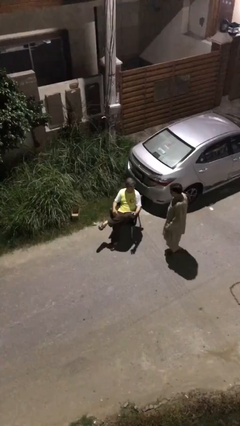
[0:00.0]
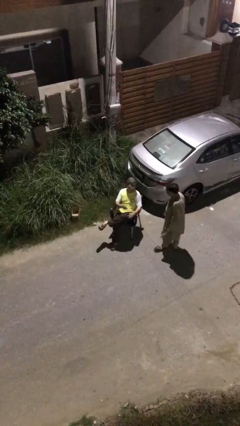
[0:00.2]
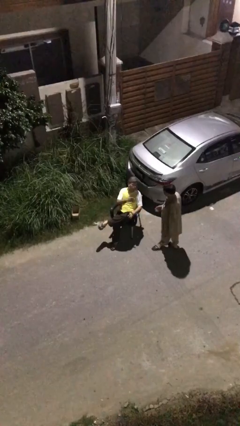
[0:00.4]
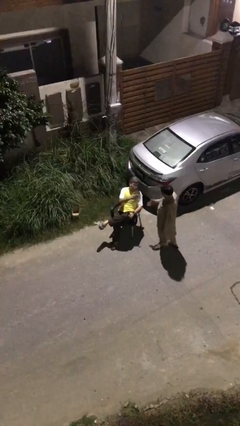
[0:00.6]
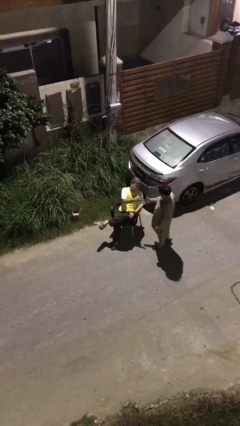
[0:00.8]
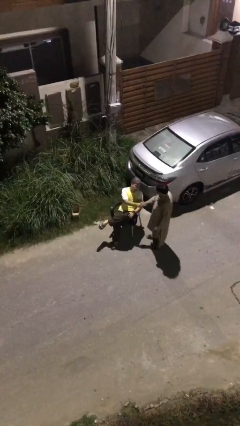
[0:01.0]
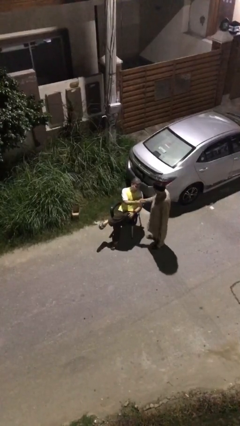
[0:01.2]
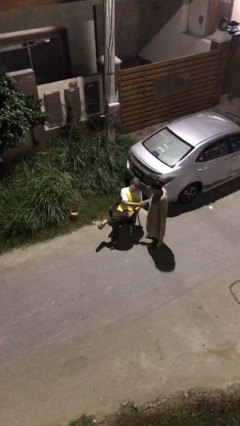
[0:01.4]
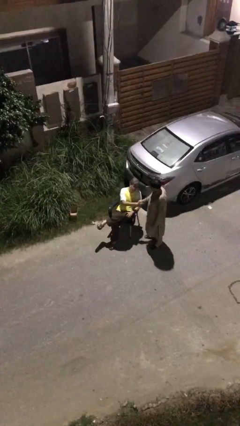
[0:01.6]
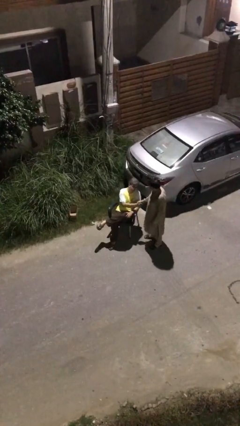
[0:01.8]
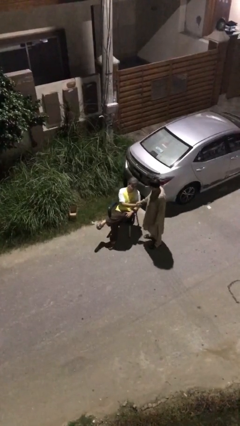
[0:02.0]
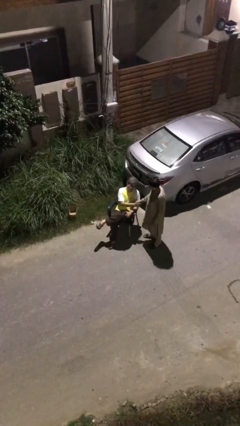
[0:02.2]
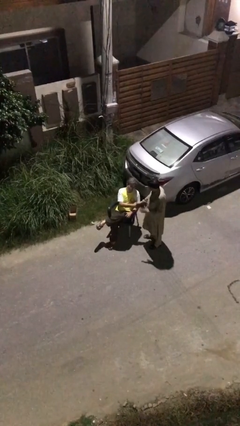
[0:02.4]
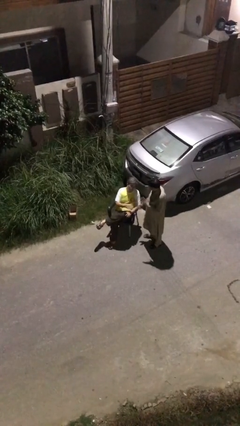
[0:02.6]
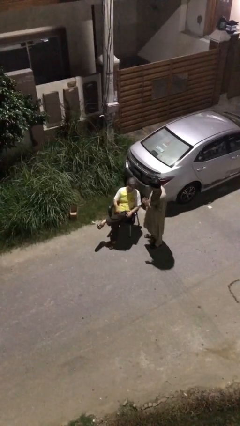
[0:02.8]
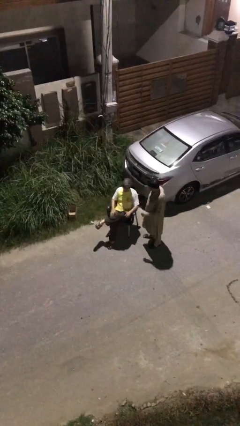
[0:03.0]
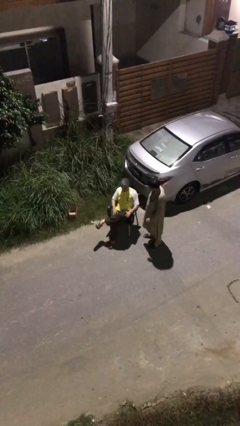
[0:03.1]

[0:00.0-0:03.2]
person shakes hand

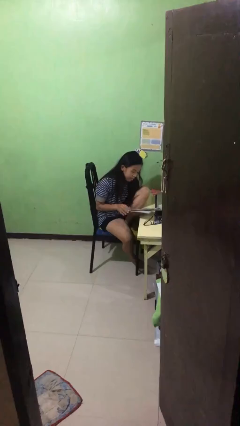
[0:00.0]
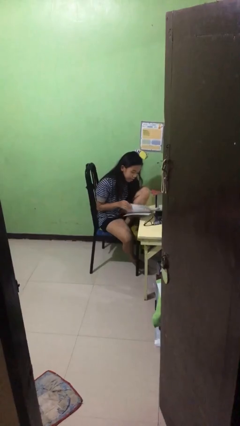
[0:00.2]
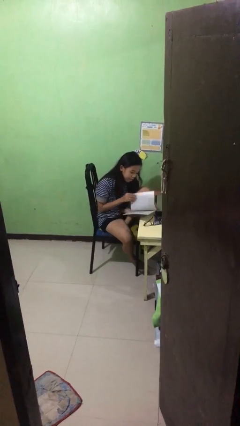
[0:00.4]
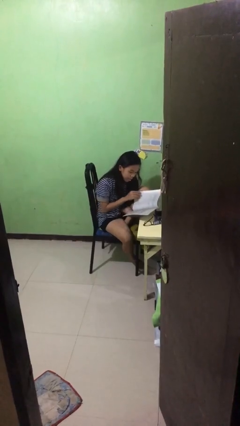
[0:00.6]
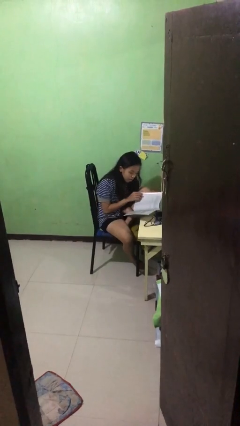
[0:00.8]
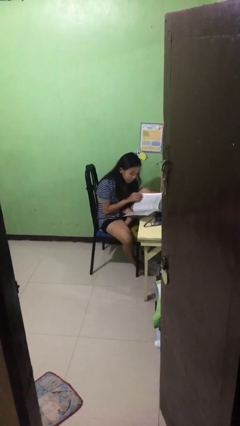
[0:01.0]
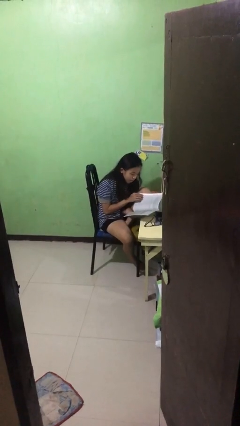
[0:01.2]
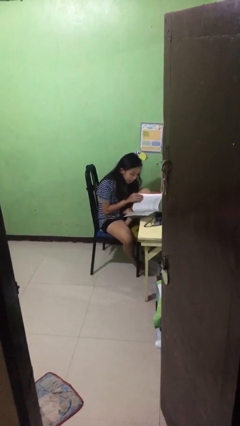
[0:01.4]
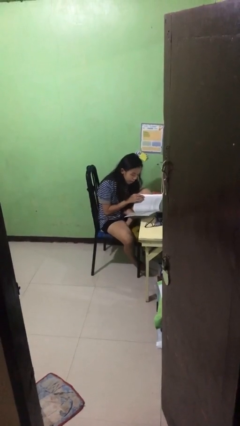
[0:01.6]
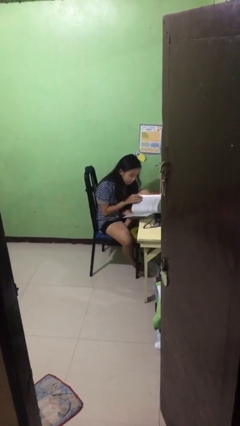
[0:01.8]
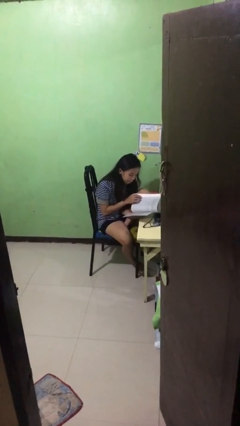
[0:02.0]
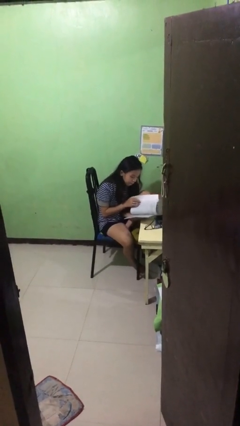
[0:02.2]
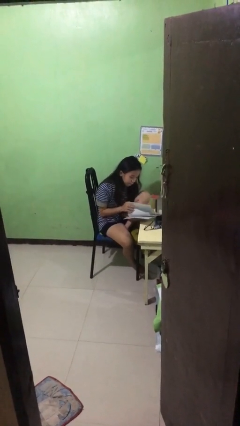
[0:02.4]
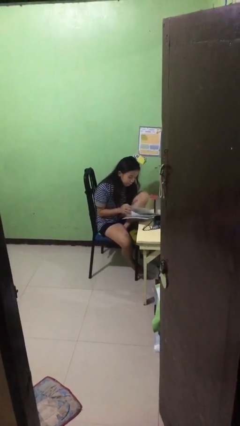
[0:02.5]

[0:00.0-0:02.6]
person reads document

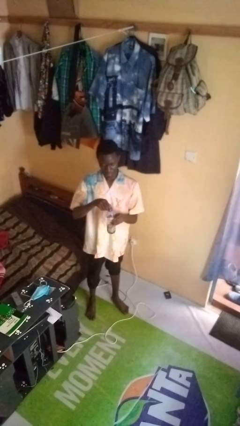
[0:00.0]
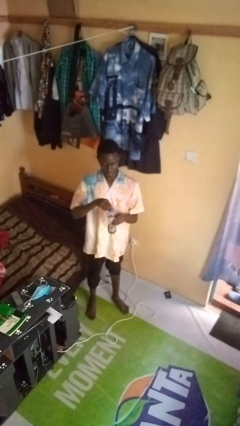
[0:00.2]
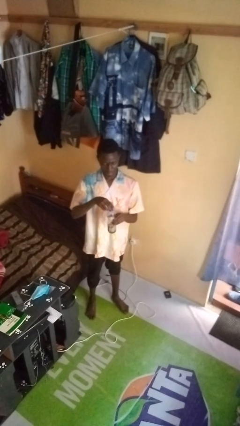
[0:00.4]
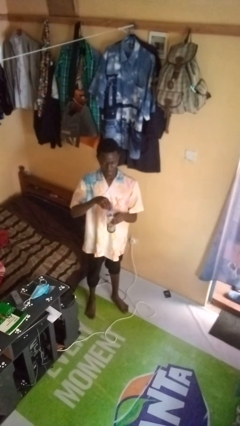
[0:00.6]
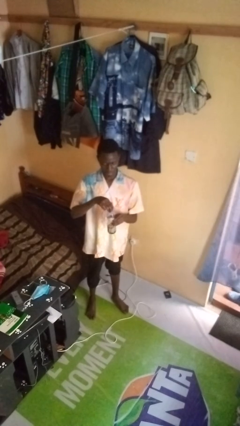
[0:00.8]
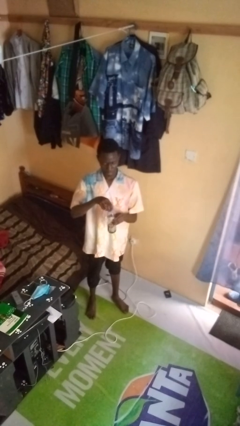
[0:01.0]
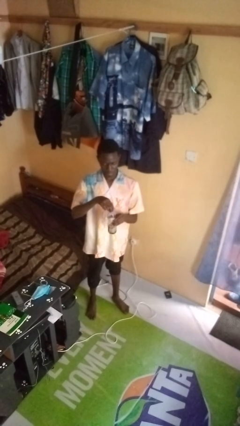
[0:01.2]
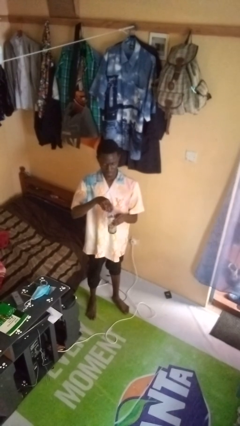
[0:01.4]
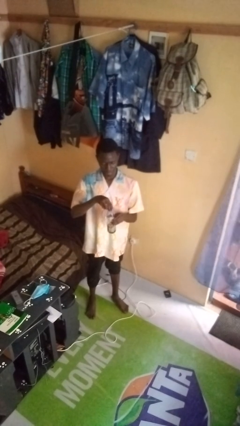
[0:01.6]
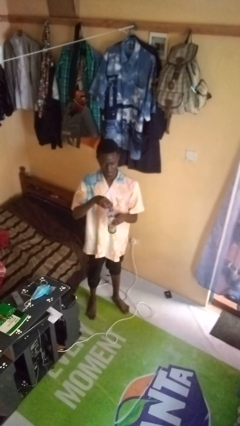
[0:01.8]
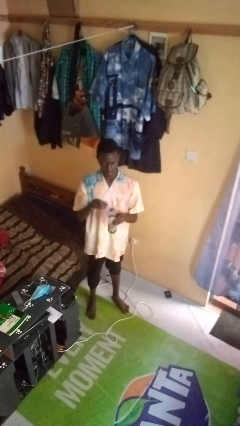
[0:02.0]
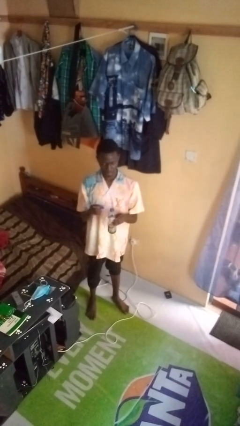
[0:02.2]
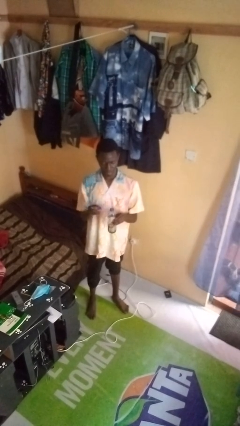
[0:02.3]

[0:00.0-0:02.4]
person unscrews lid from bottle

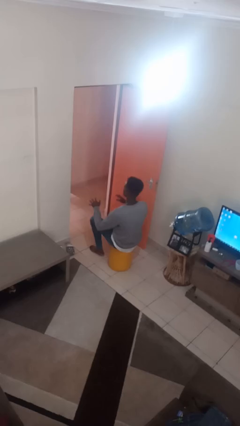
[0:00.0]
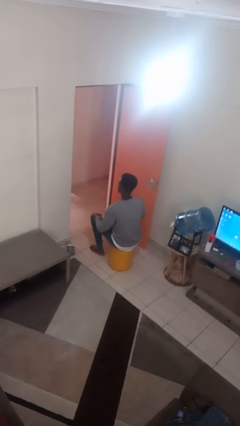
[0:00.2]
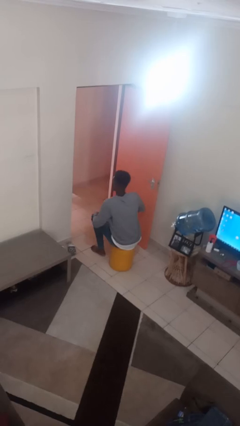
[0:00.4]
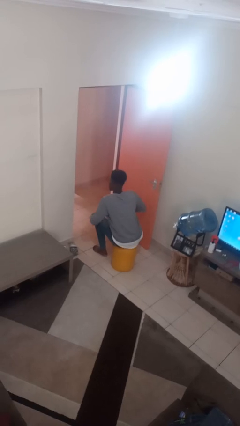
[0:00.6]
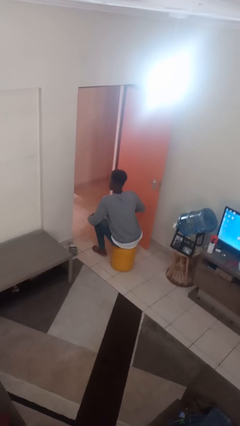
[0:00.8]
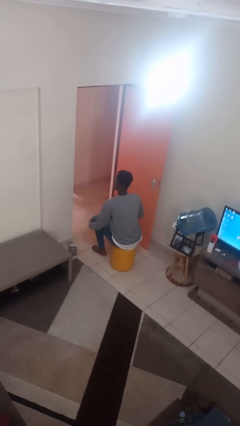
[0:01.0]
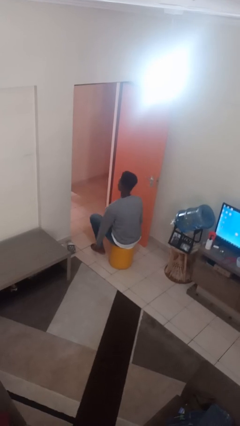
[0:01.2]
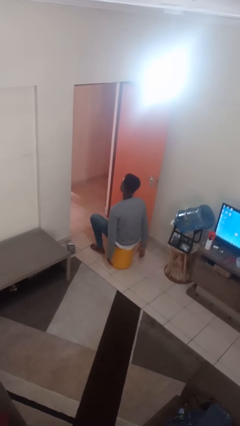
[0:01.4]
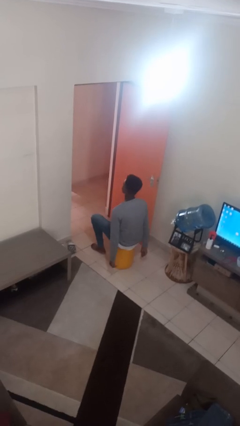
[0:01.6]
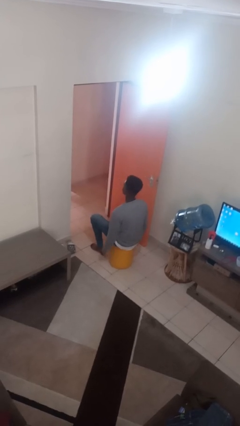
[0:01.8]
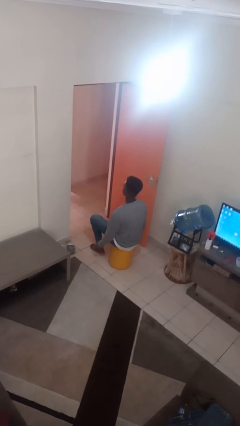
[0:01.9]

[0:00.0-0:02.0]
person slaps hands on thighs

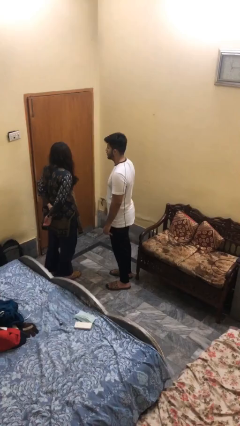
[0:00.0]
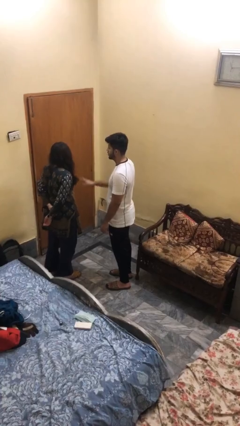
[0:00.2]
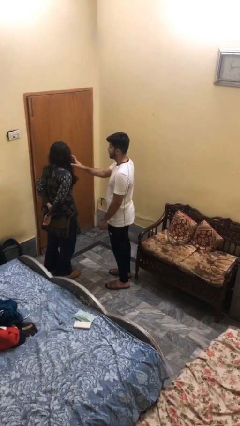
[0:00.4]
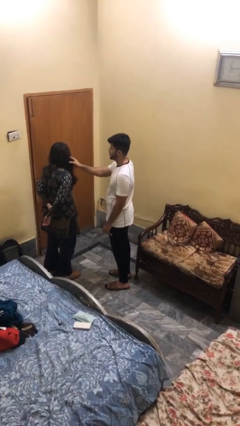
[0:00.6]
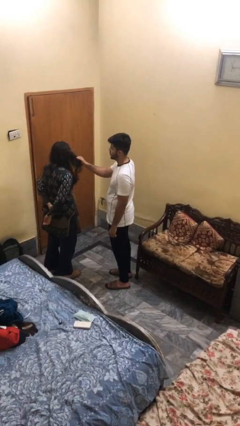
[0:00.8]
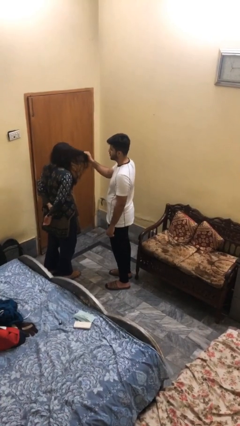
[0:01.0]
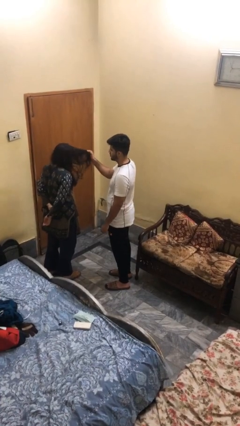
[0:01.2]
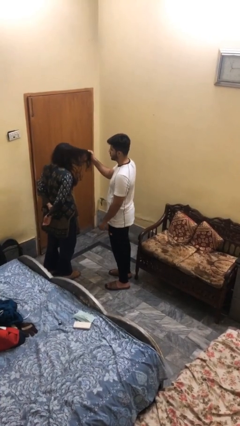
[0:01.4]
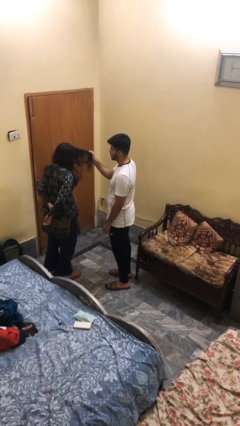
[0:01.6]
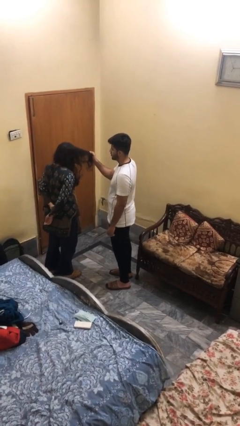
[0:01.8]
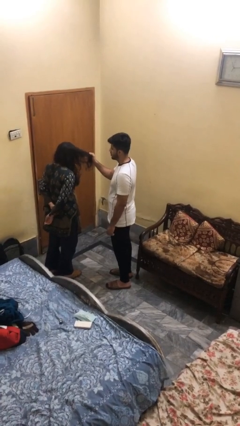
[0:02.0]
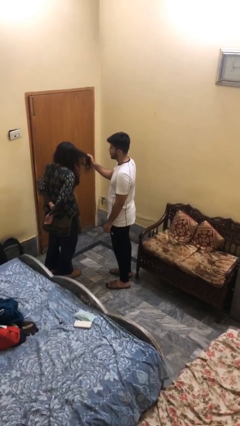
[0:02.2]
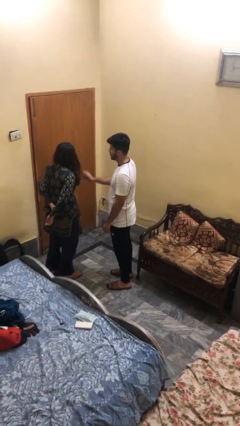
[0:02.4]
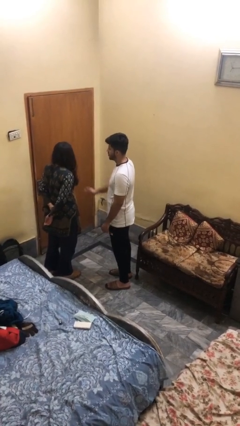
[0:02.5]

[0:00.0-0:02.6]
person grabs person by hair

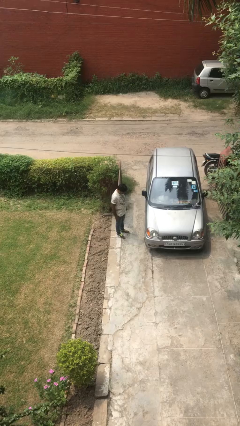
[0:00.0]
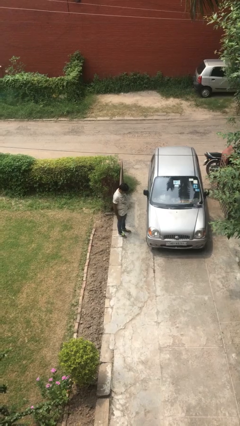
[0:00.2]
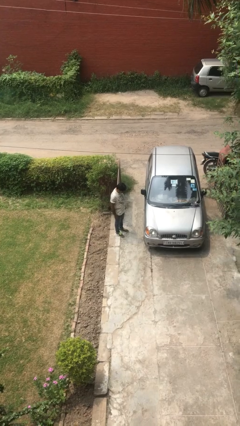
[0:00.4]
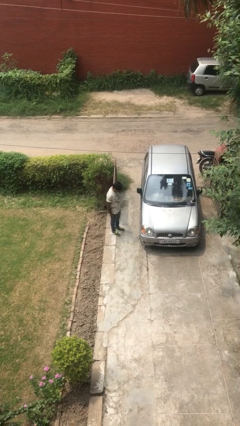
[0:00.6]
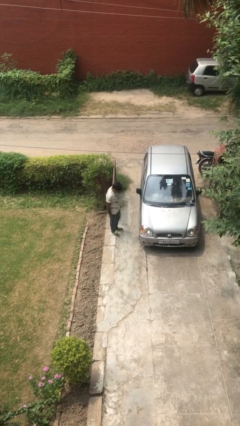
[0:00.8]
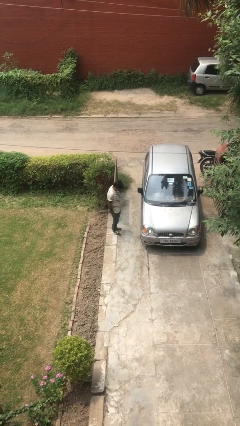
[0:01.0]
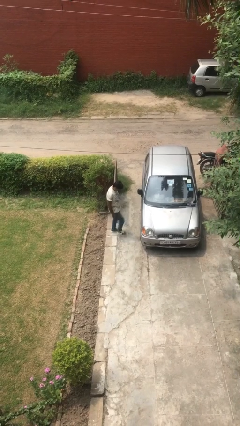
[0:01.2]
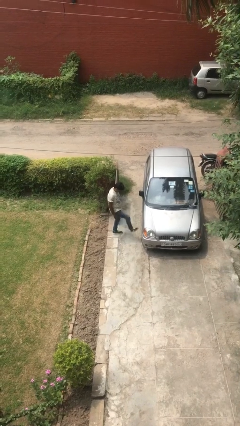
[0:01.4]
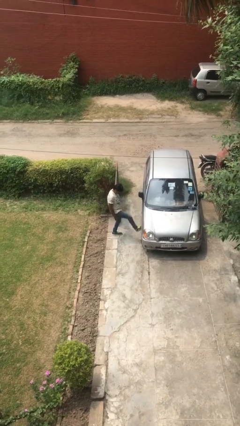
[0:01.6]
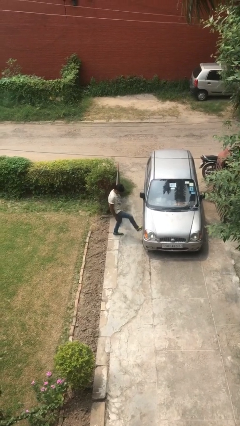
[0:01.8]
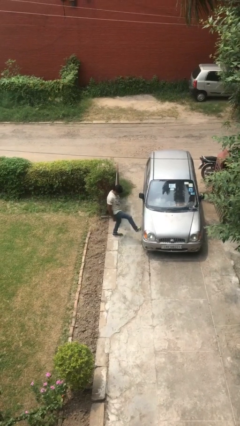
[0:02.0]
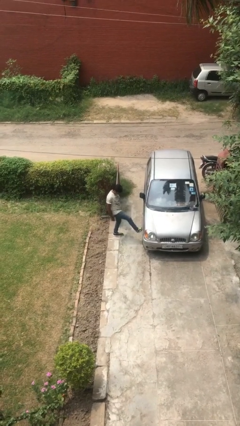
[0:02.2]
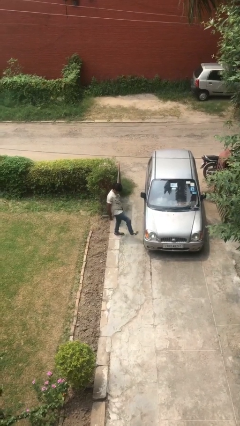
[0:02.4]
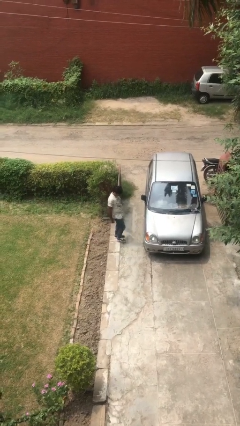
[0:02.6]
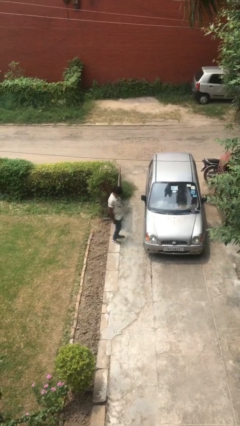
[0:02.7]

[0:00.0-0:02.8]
person kicks car tires

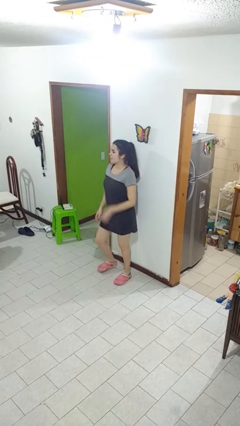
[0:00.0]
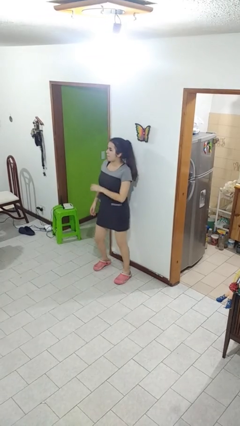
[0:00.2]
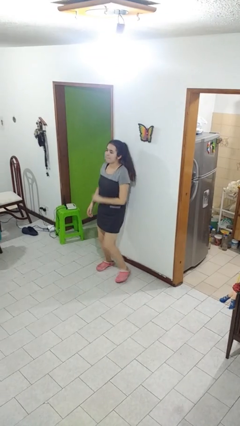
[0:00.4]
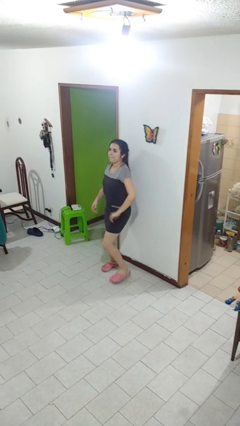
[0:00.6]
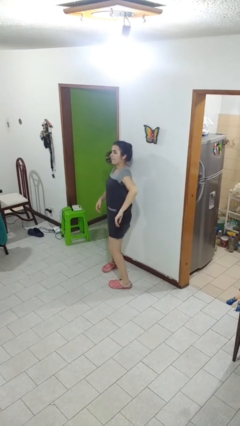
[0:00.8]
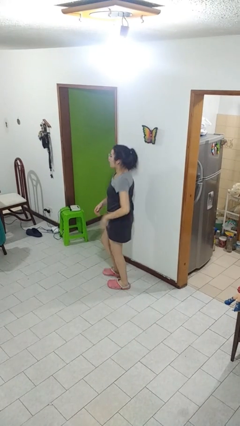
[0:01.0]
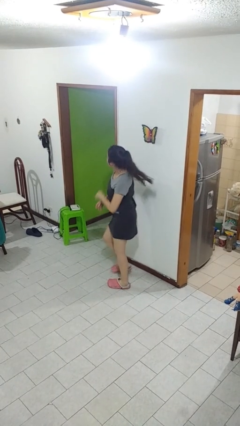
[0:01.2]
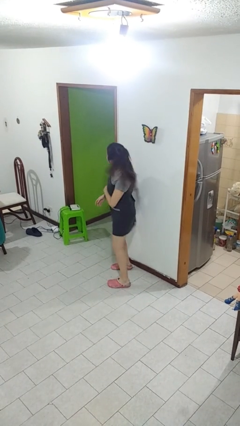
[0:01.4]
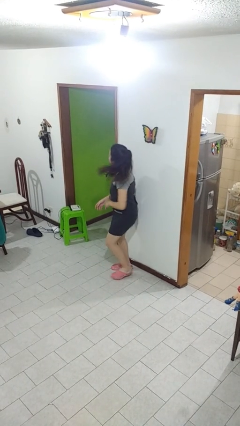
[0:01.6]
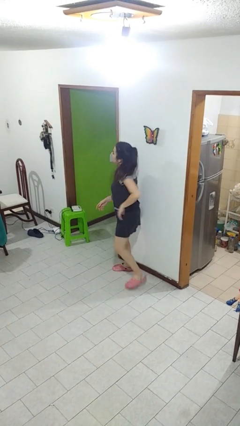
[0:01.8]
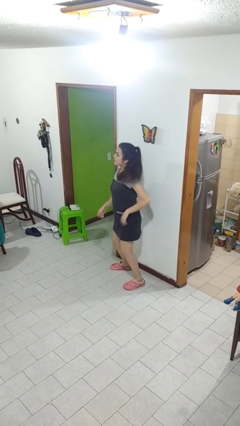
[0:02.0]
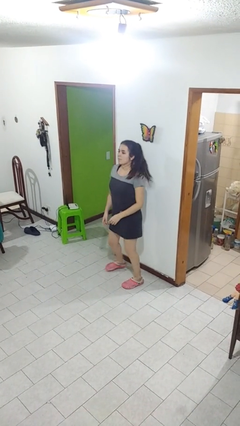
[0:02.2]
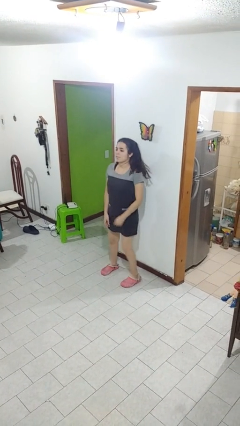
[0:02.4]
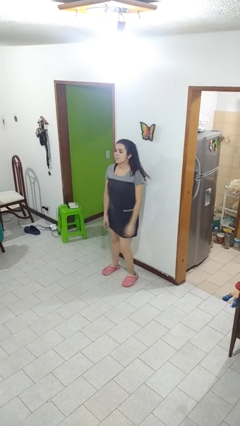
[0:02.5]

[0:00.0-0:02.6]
person dances in place
